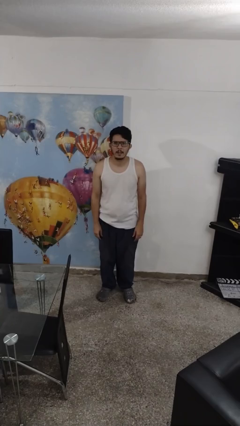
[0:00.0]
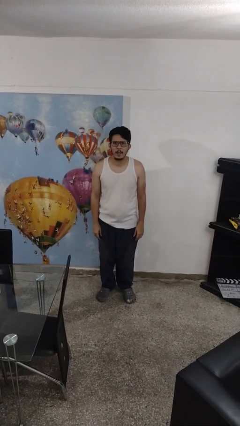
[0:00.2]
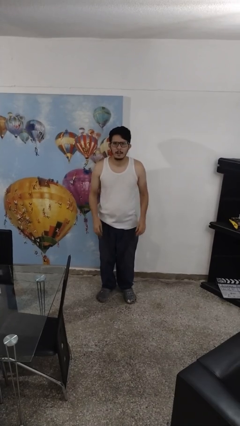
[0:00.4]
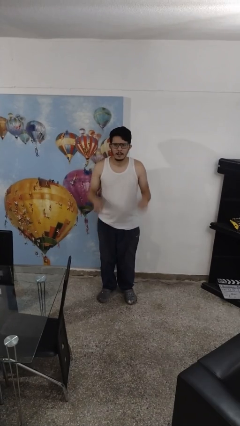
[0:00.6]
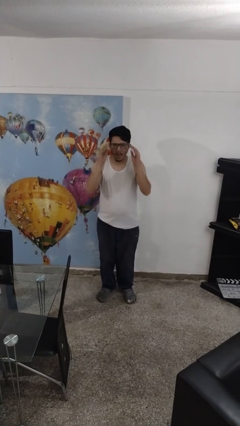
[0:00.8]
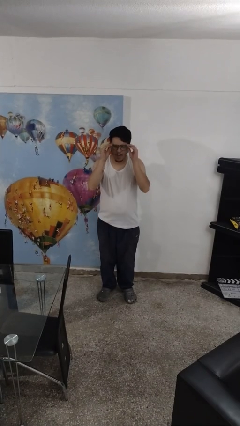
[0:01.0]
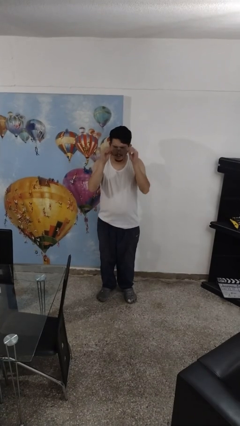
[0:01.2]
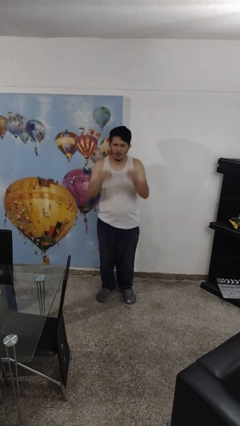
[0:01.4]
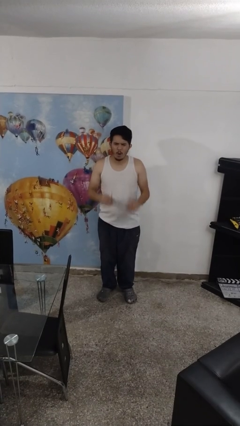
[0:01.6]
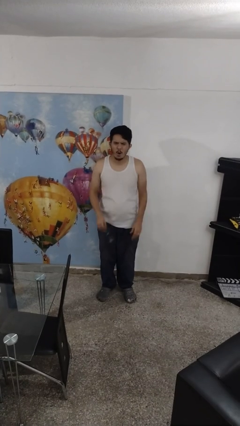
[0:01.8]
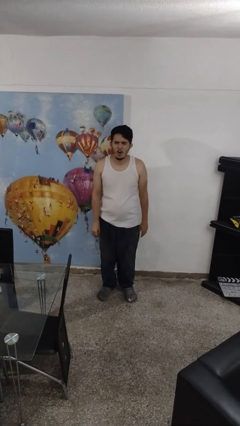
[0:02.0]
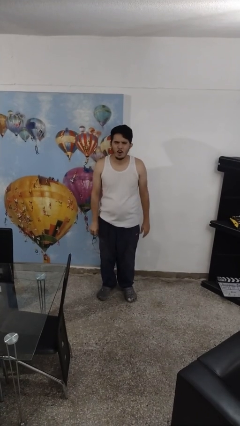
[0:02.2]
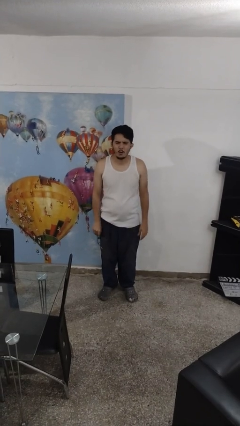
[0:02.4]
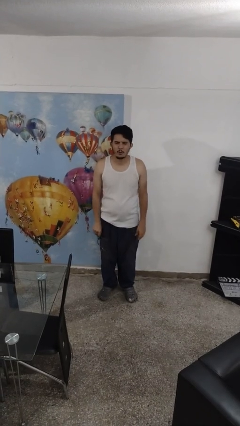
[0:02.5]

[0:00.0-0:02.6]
person takes off glasses

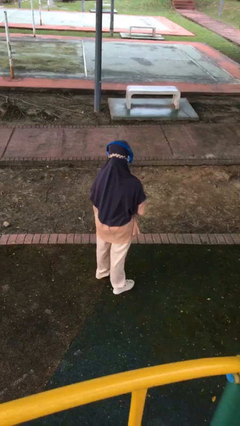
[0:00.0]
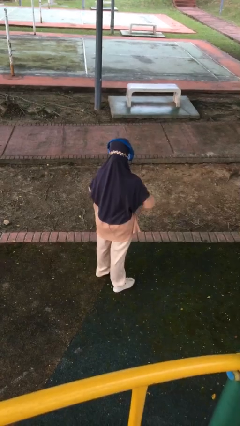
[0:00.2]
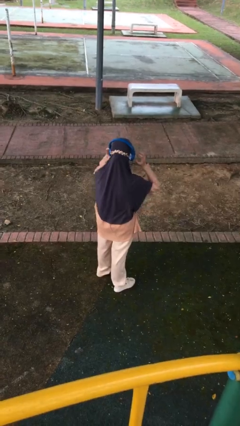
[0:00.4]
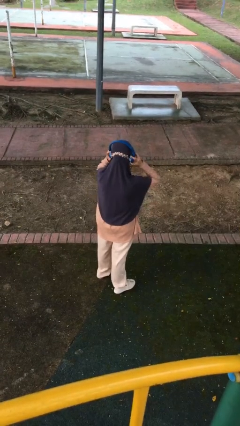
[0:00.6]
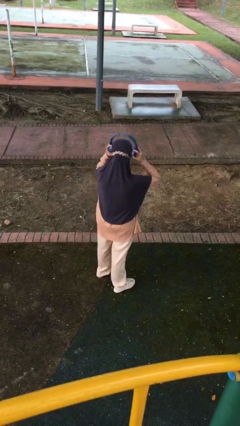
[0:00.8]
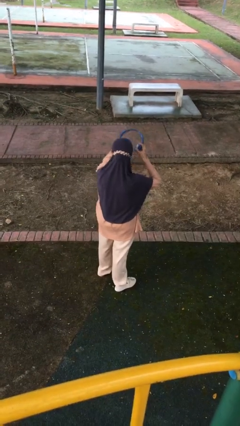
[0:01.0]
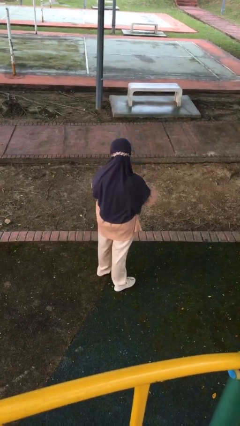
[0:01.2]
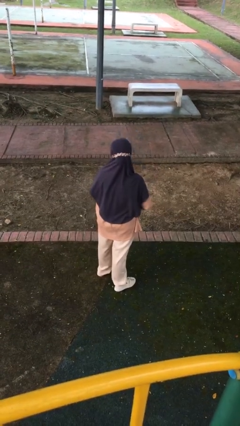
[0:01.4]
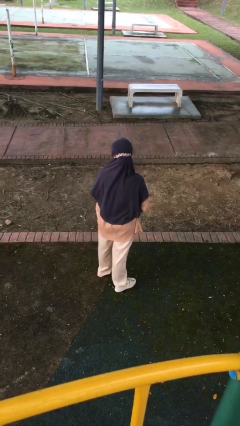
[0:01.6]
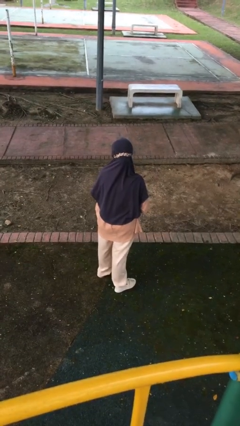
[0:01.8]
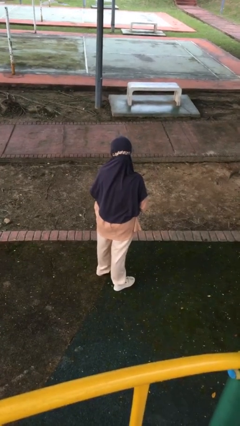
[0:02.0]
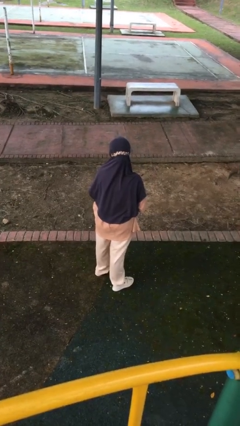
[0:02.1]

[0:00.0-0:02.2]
person takes off headphones

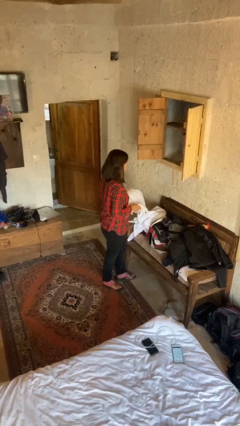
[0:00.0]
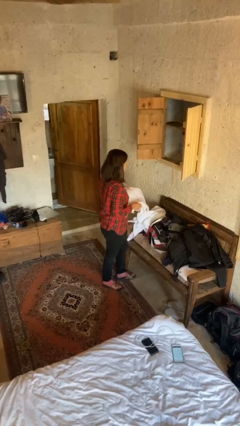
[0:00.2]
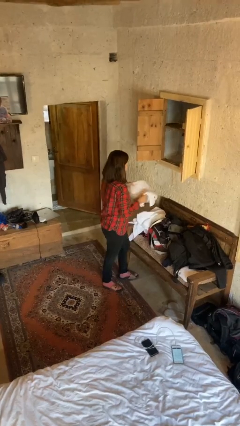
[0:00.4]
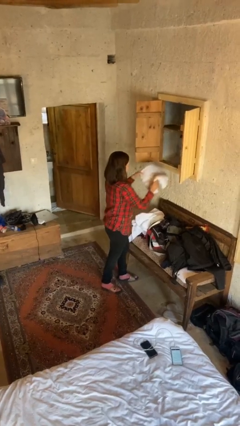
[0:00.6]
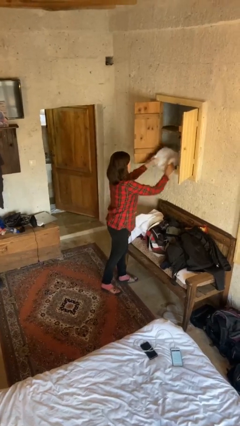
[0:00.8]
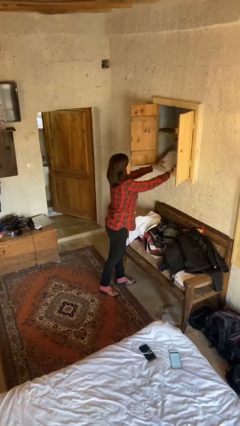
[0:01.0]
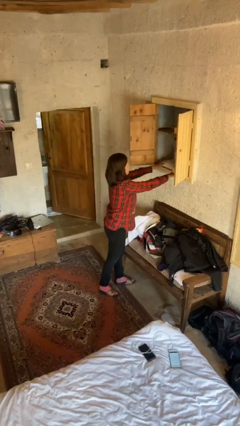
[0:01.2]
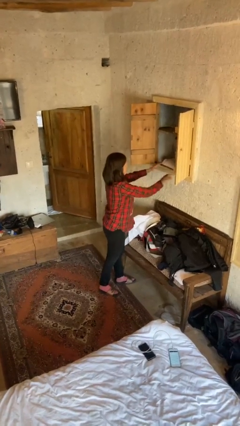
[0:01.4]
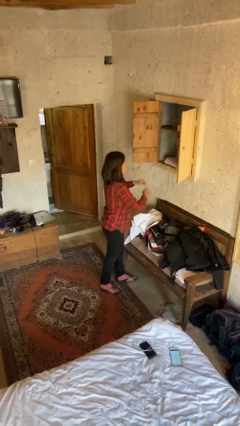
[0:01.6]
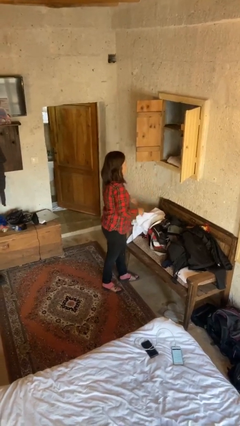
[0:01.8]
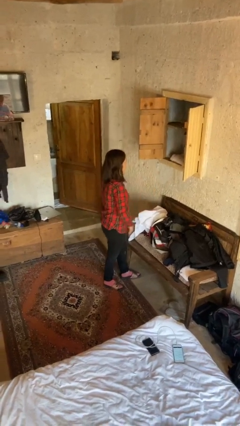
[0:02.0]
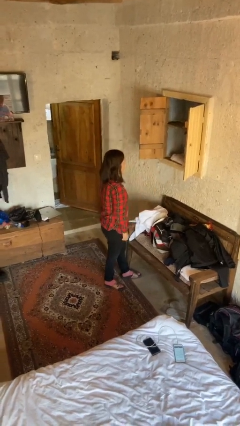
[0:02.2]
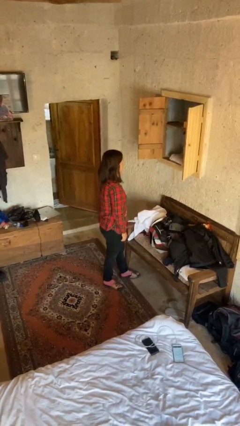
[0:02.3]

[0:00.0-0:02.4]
person puts clothes into dresser

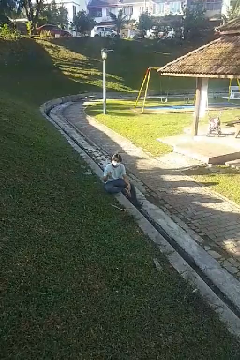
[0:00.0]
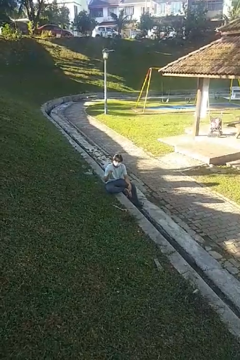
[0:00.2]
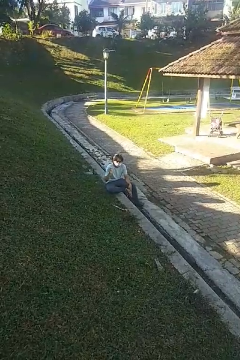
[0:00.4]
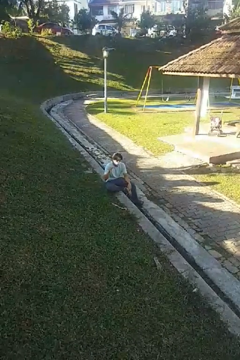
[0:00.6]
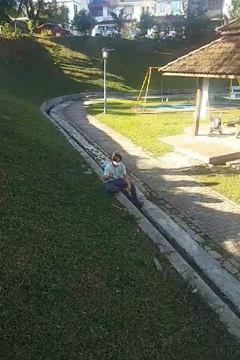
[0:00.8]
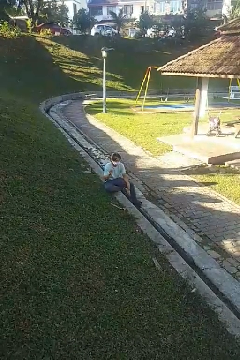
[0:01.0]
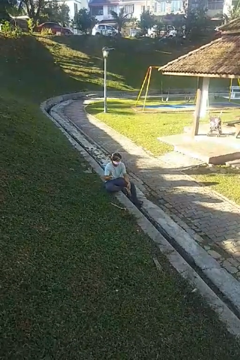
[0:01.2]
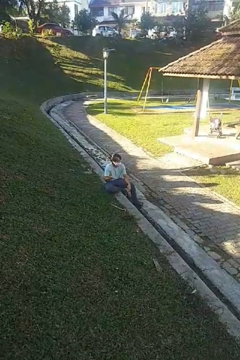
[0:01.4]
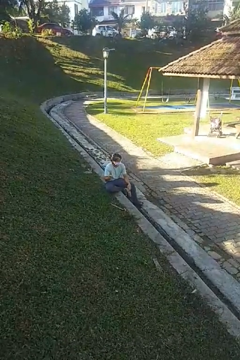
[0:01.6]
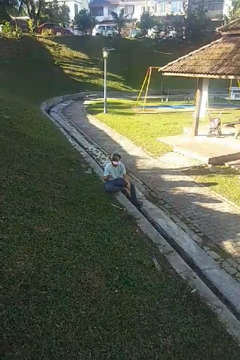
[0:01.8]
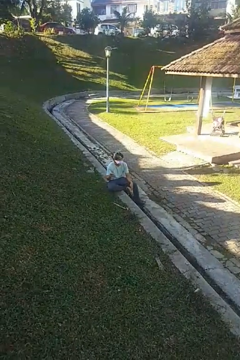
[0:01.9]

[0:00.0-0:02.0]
person snaps fingers

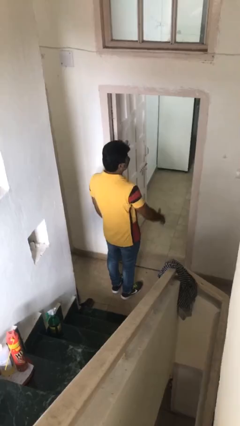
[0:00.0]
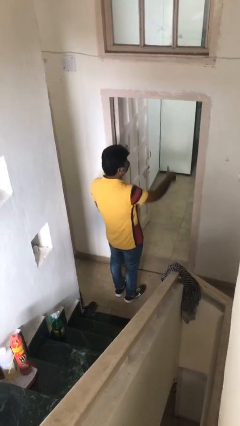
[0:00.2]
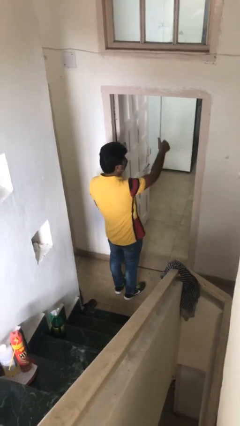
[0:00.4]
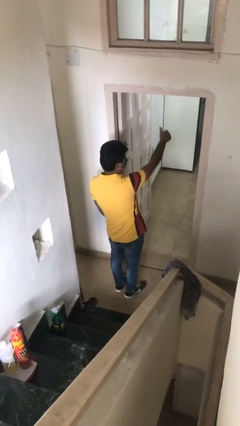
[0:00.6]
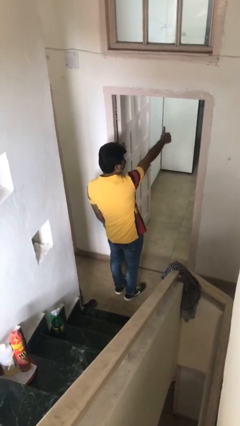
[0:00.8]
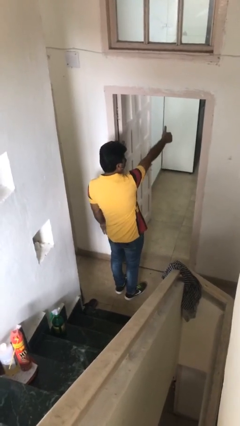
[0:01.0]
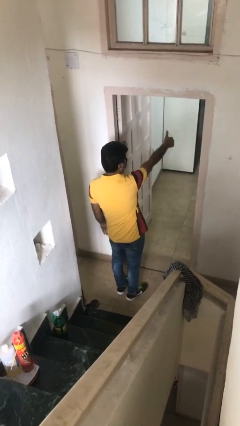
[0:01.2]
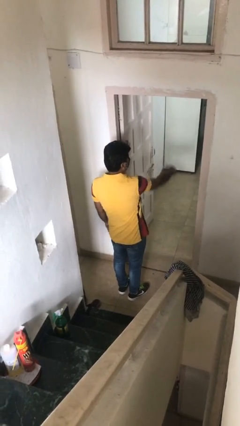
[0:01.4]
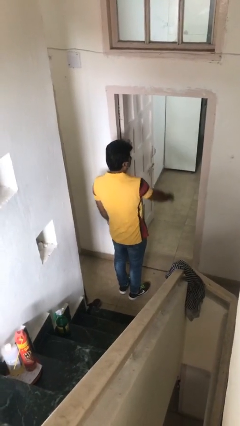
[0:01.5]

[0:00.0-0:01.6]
person gestures thumbs up

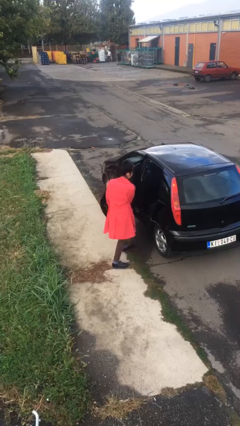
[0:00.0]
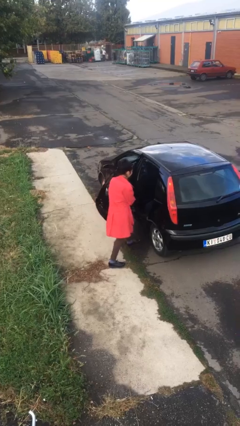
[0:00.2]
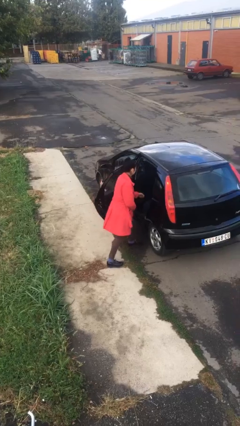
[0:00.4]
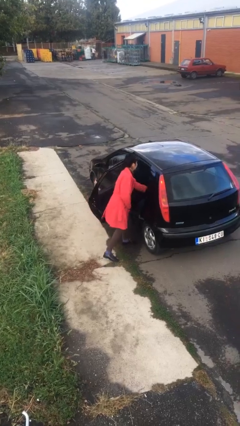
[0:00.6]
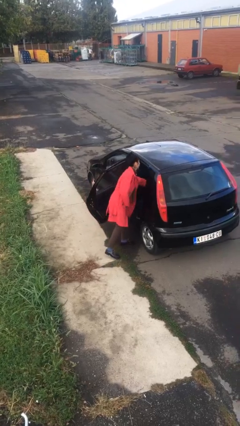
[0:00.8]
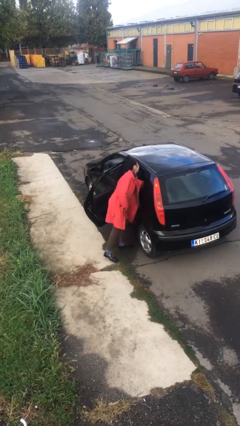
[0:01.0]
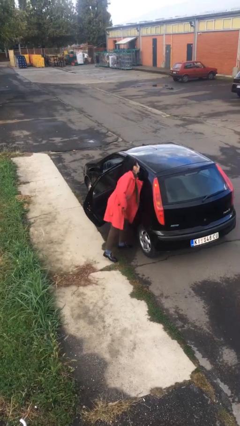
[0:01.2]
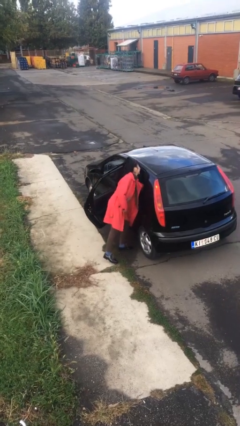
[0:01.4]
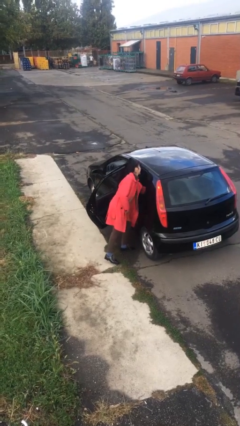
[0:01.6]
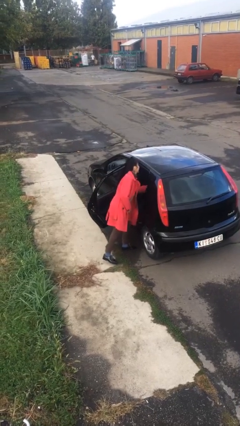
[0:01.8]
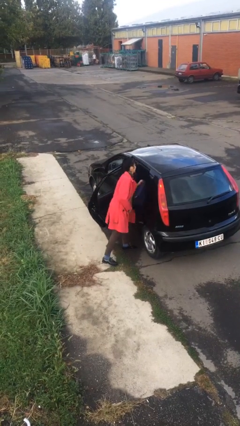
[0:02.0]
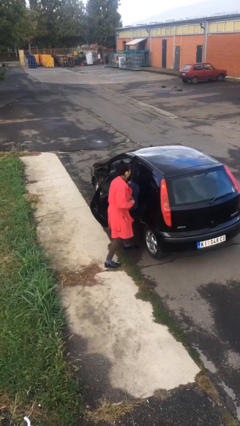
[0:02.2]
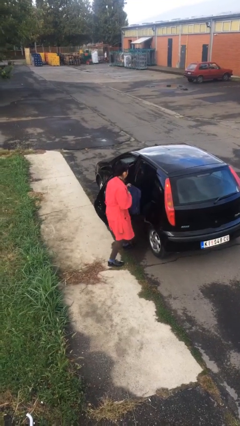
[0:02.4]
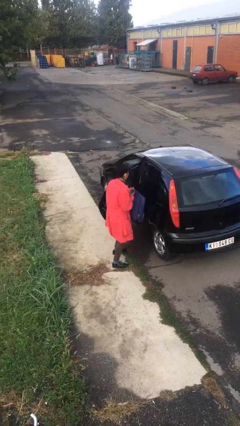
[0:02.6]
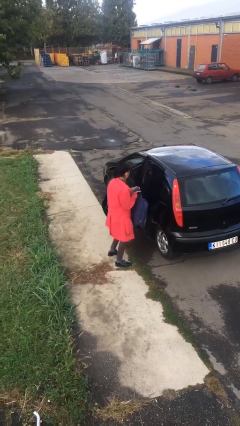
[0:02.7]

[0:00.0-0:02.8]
person unloads car

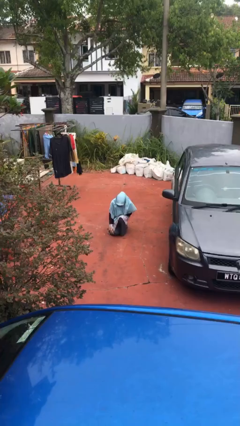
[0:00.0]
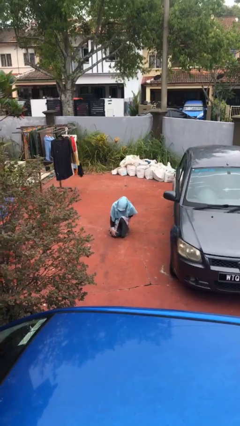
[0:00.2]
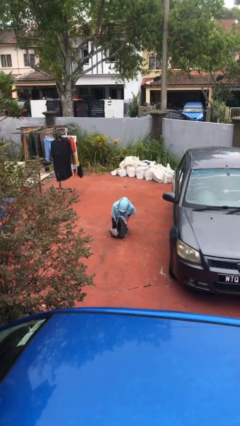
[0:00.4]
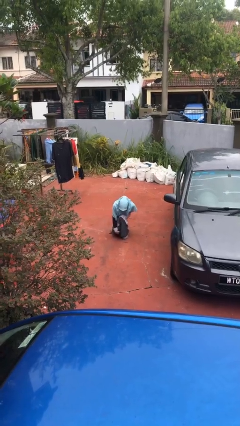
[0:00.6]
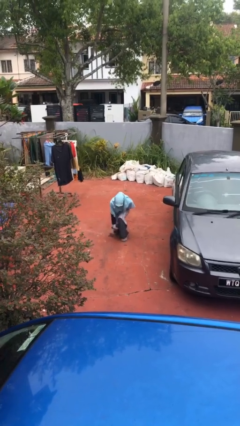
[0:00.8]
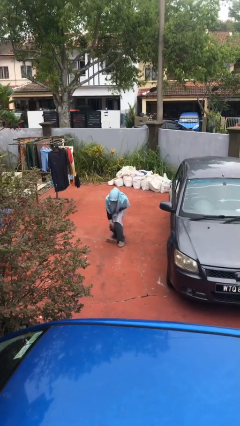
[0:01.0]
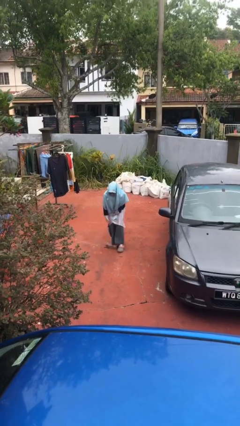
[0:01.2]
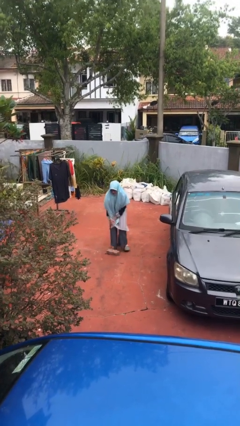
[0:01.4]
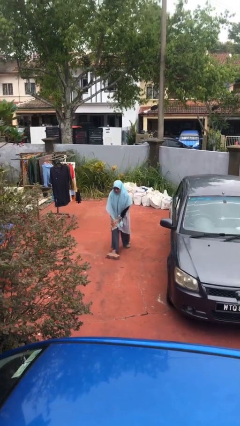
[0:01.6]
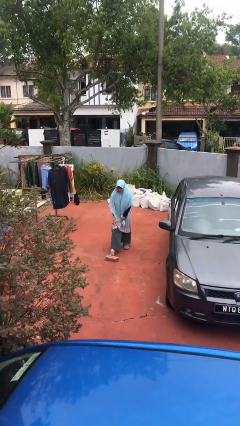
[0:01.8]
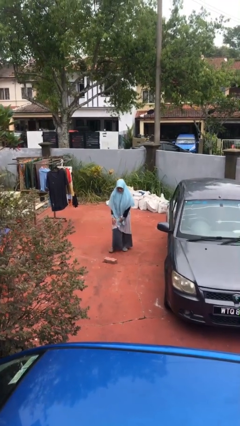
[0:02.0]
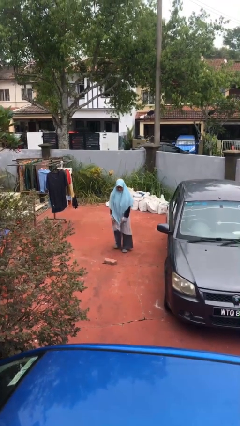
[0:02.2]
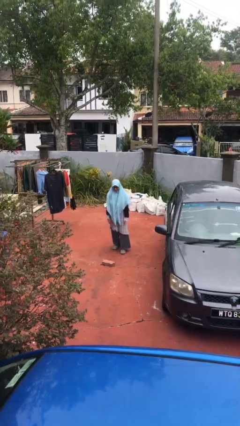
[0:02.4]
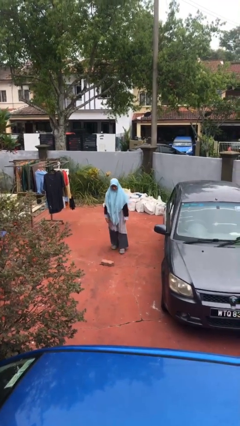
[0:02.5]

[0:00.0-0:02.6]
person stands up from floor

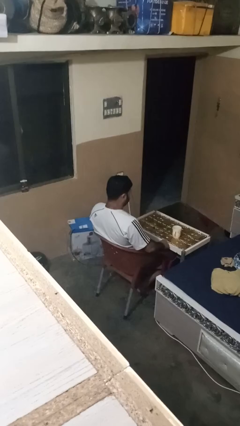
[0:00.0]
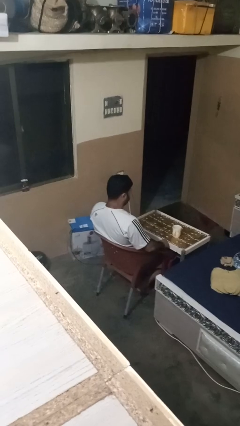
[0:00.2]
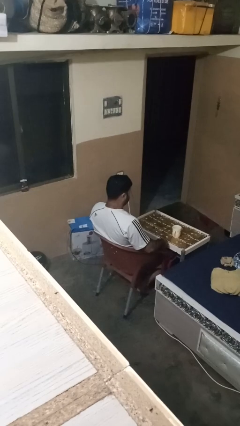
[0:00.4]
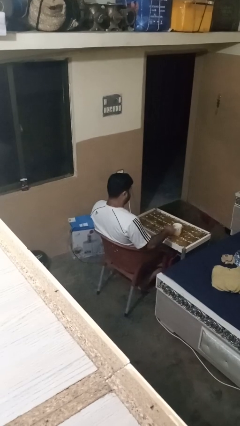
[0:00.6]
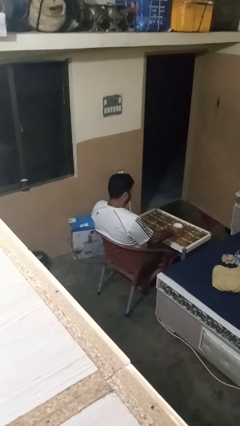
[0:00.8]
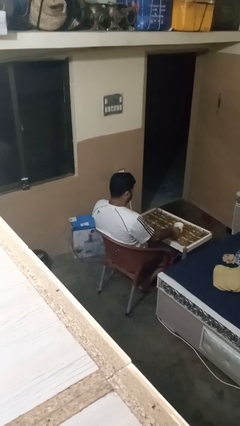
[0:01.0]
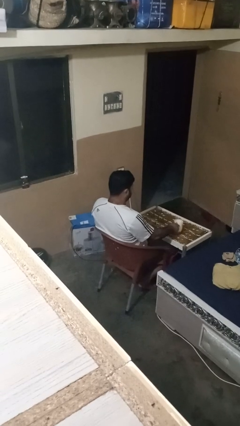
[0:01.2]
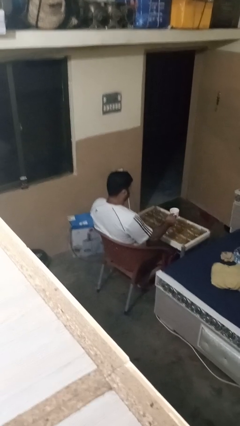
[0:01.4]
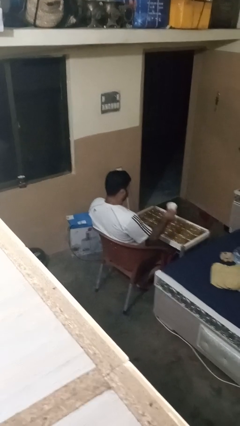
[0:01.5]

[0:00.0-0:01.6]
person picks up object from table
